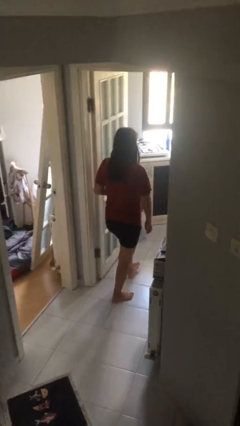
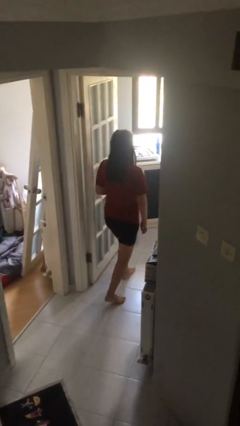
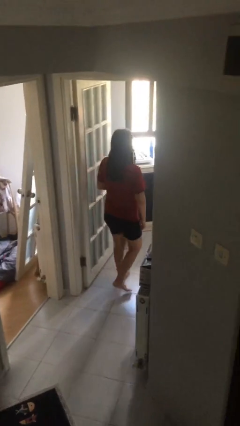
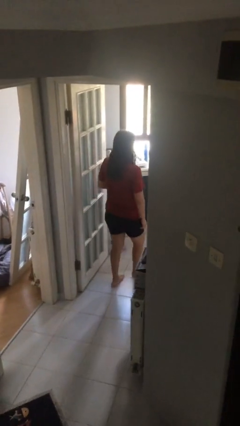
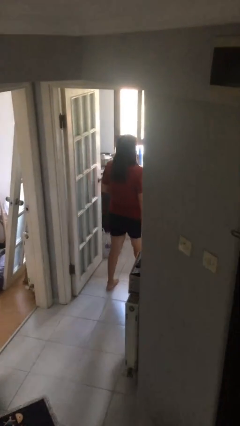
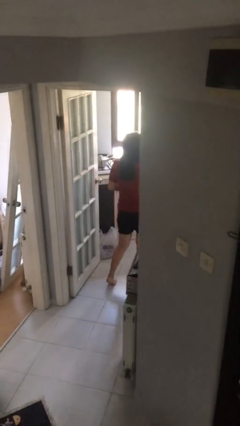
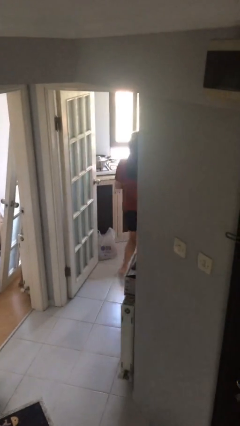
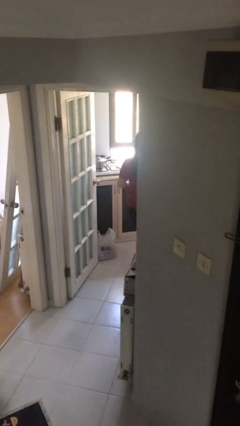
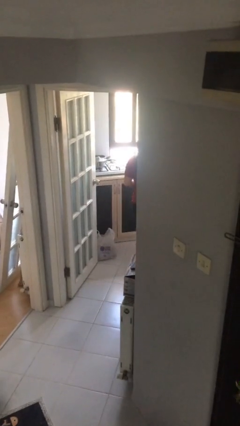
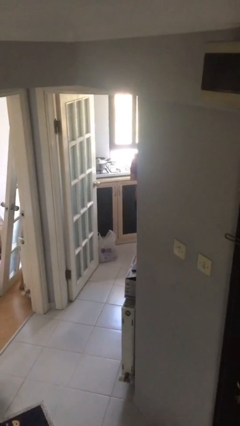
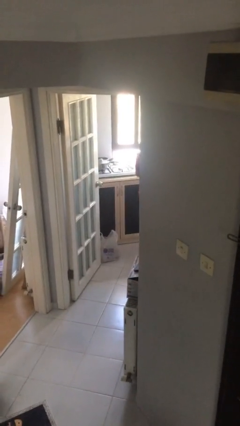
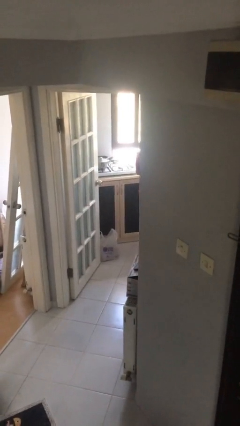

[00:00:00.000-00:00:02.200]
person exits scene through structure

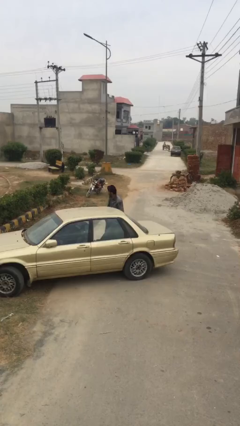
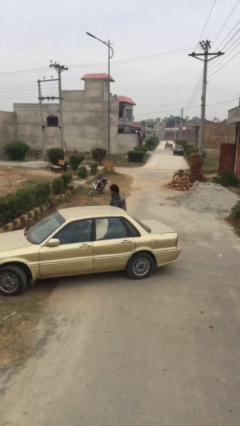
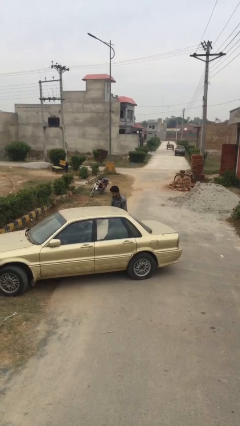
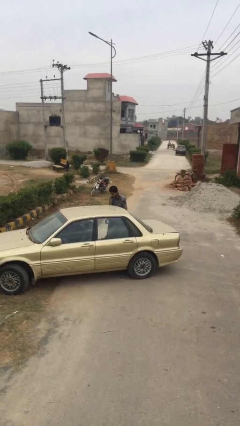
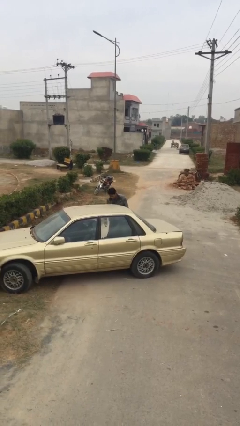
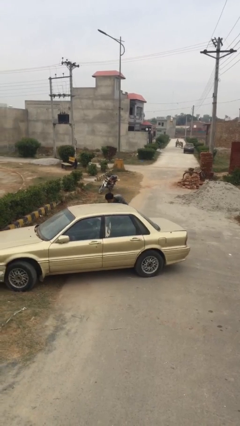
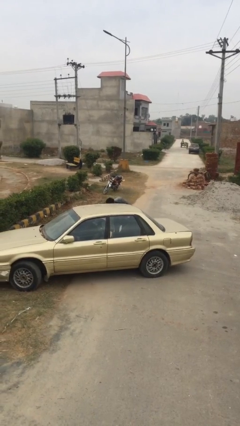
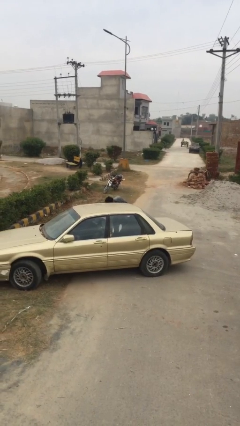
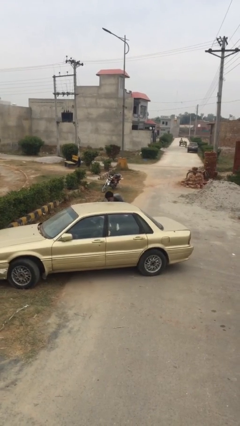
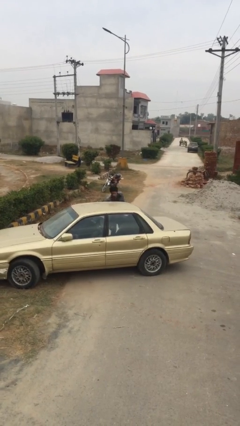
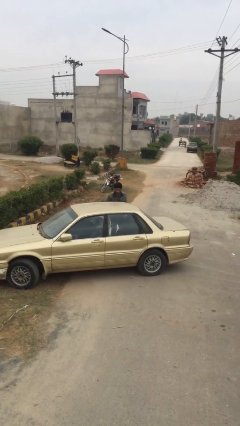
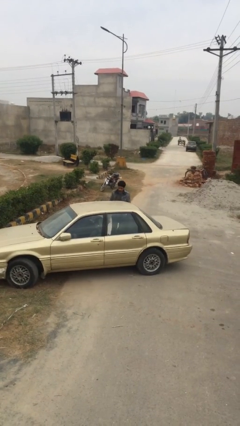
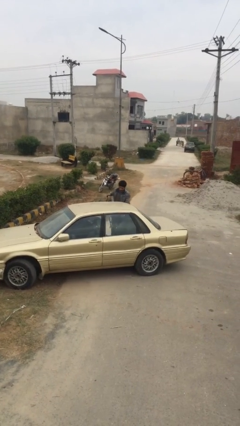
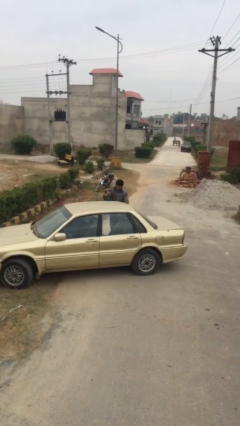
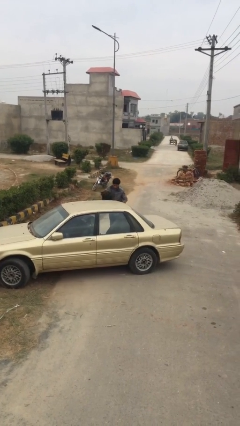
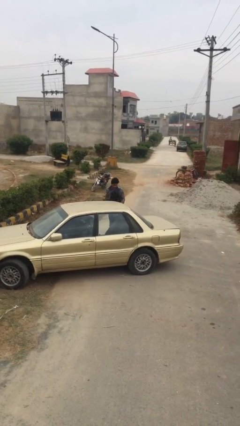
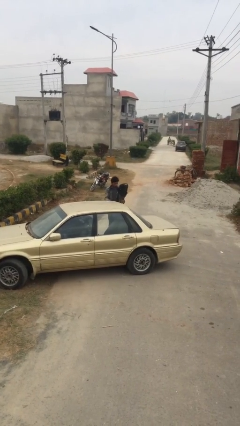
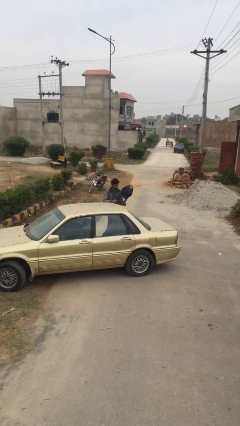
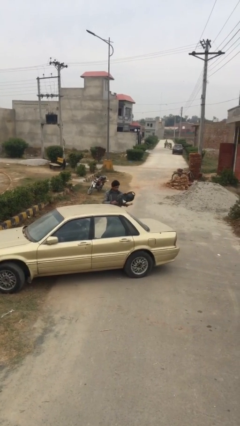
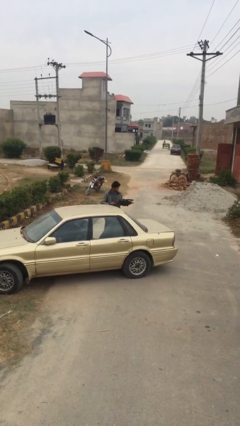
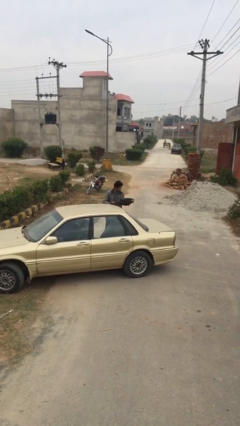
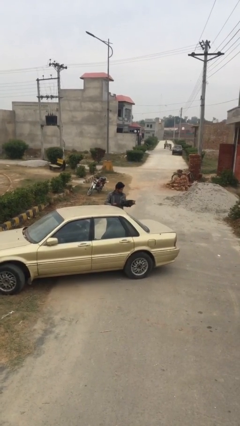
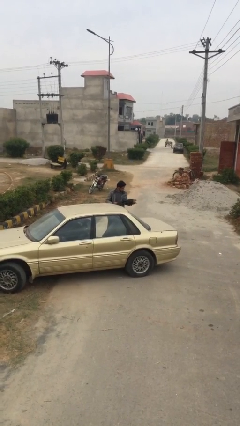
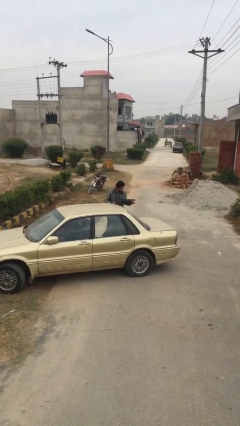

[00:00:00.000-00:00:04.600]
person unloads car

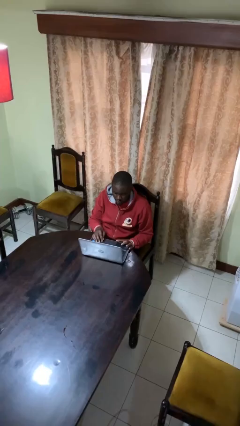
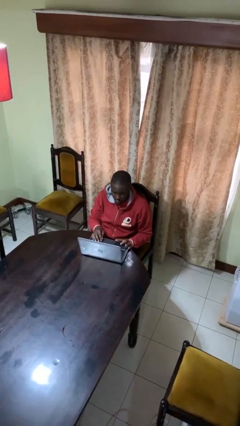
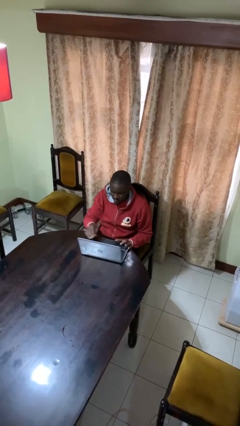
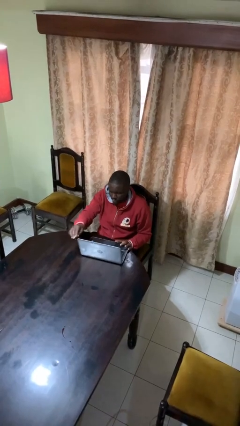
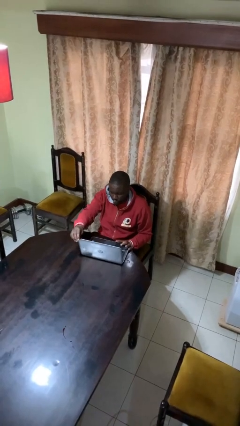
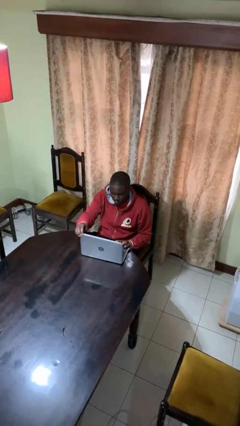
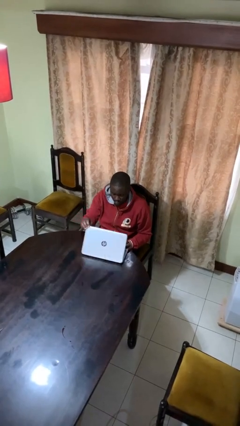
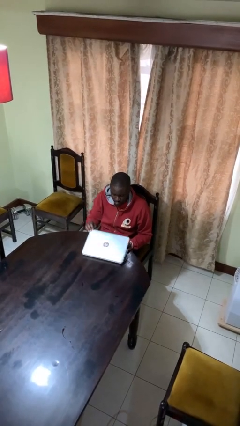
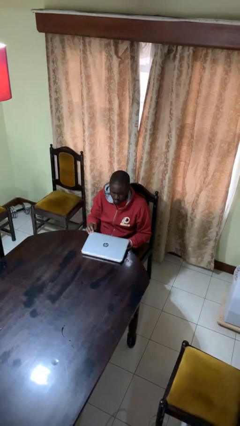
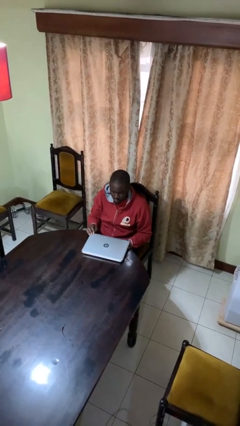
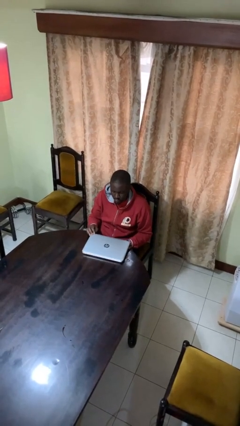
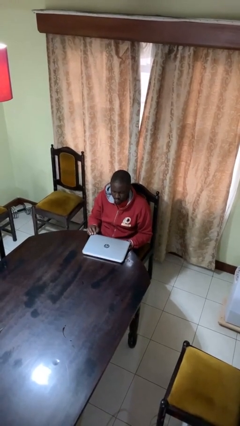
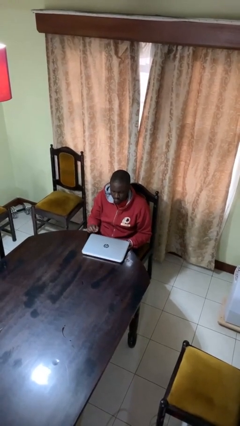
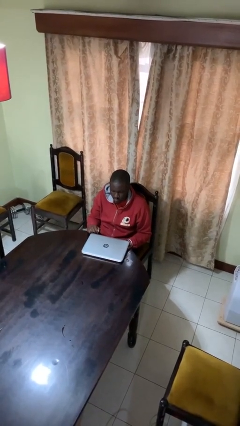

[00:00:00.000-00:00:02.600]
person closes laptop

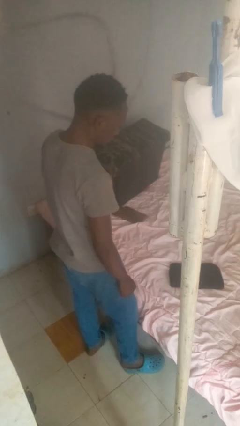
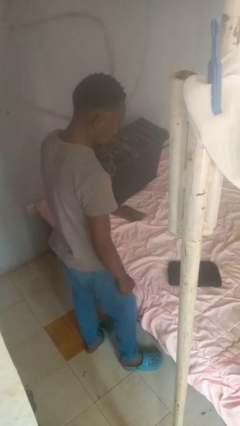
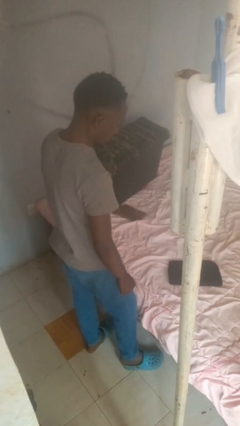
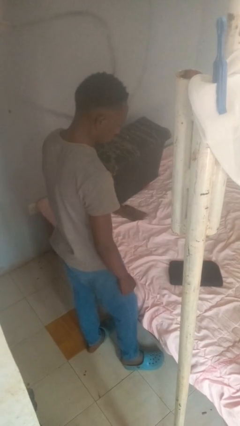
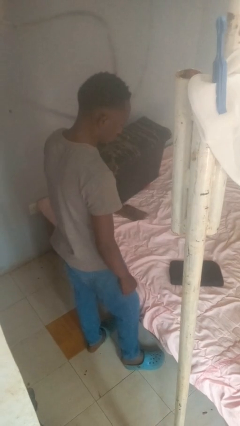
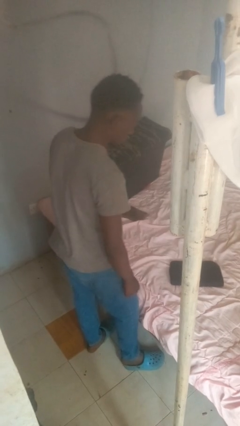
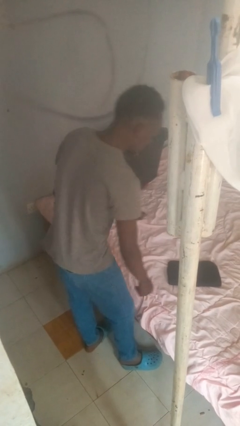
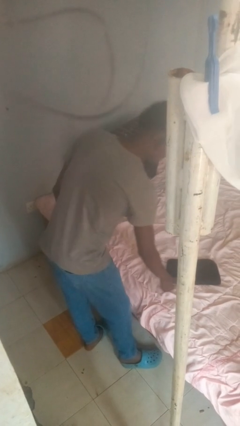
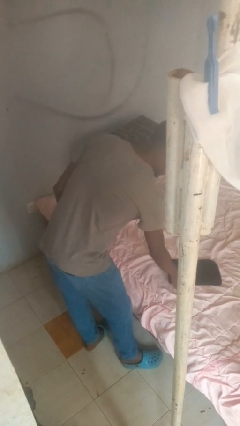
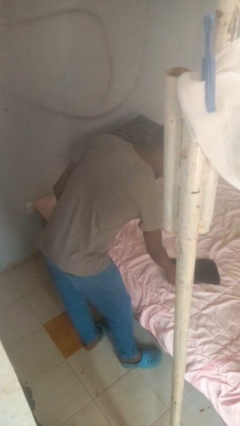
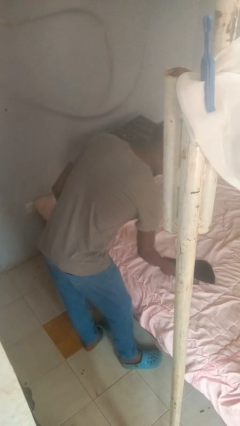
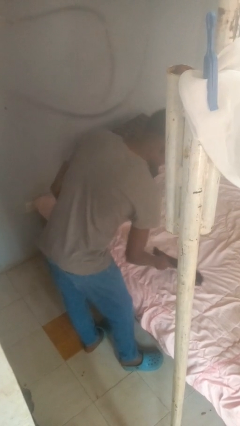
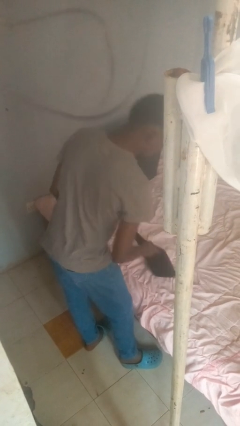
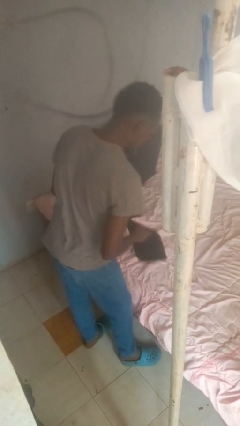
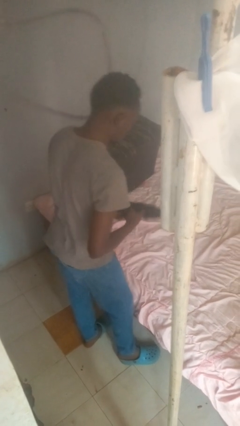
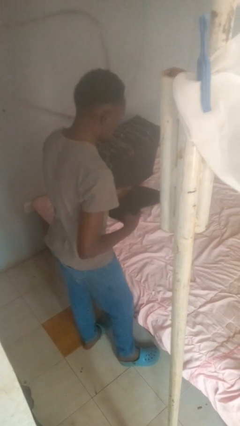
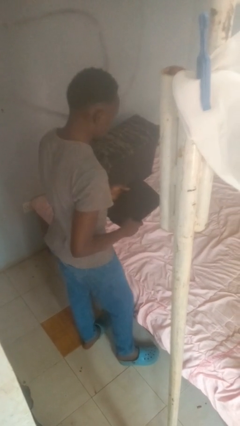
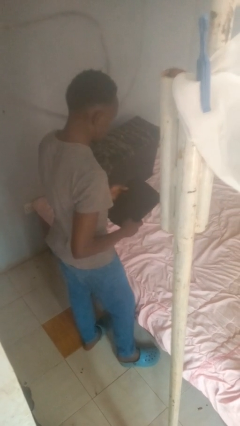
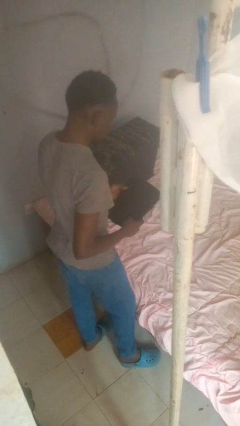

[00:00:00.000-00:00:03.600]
person picks up object from bed

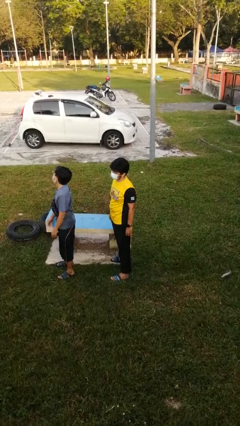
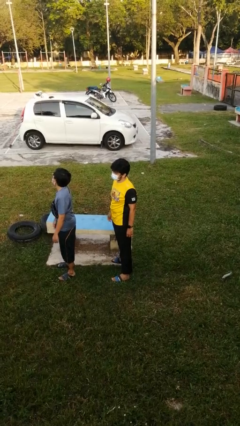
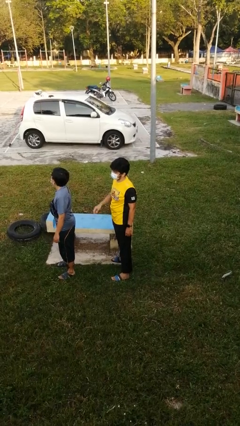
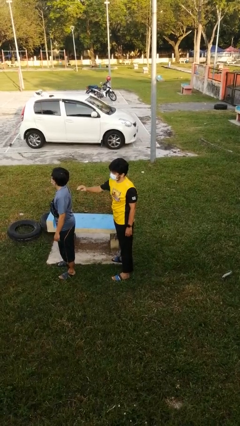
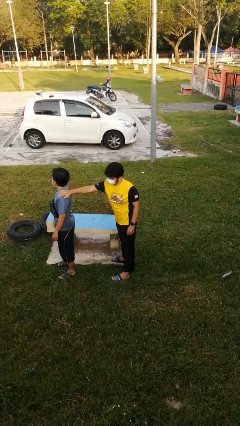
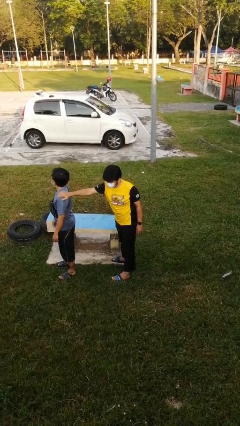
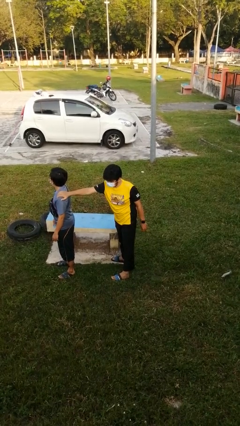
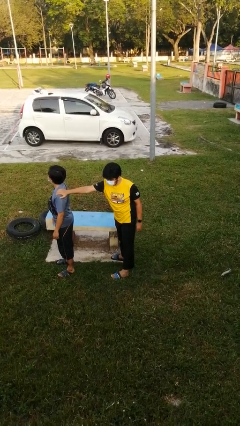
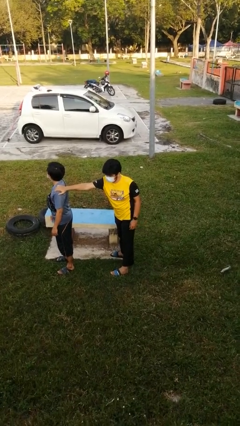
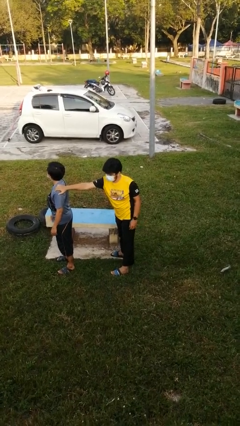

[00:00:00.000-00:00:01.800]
person grabs person by shoulder

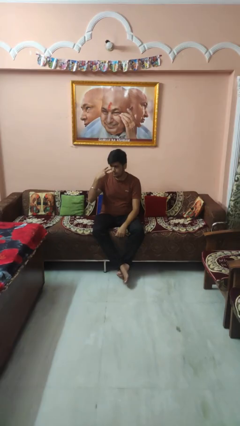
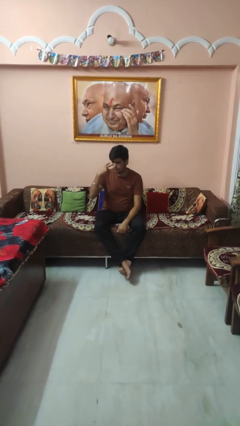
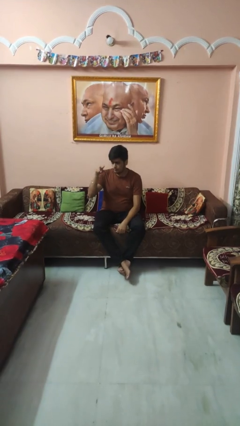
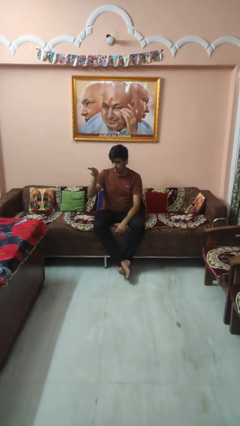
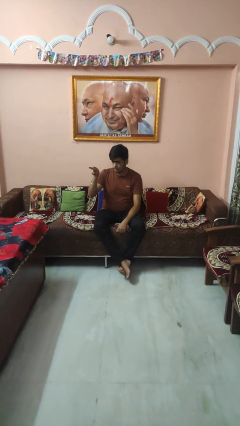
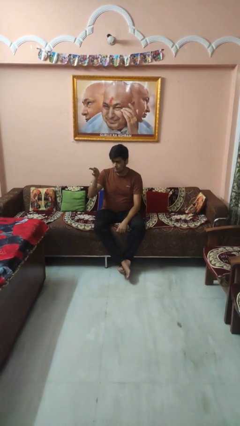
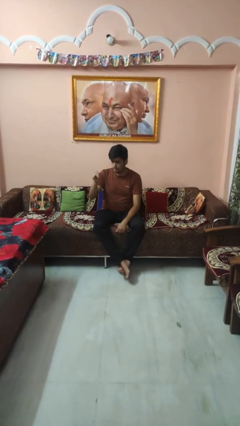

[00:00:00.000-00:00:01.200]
person gestures watch closely

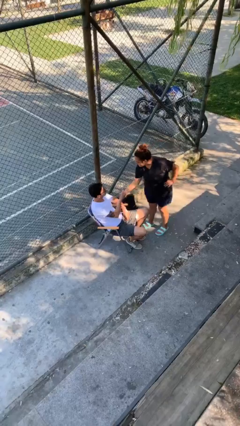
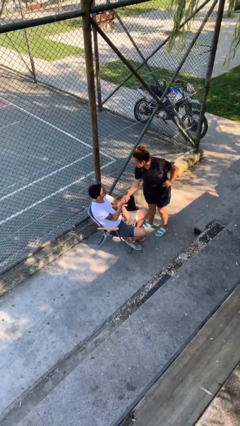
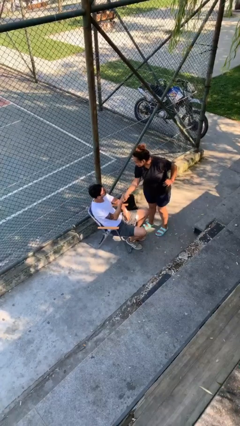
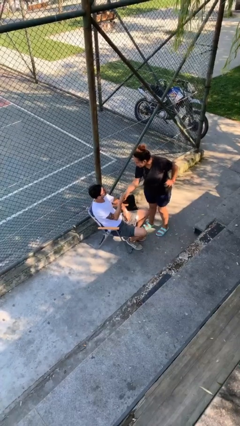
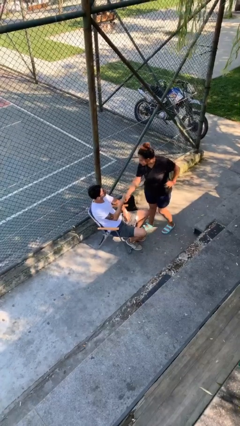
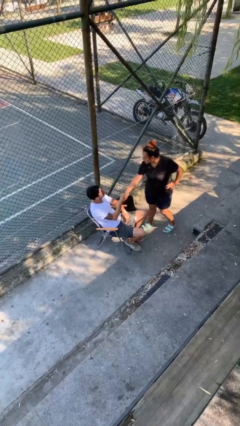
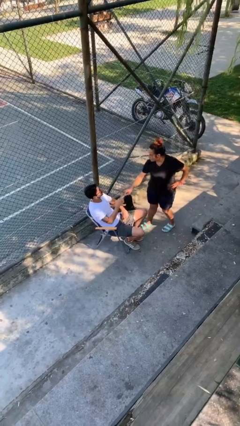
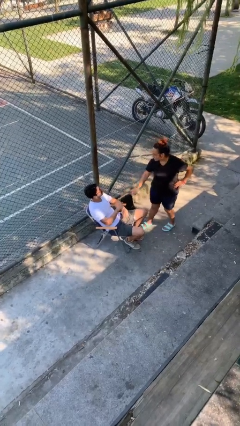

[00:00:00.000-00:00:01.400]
person shakes hand
